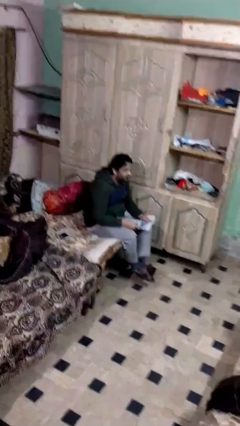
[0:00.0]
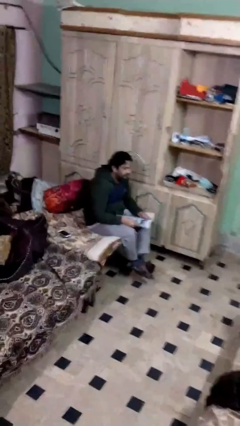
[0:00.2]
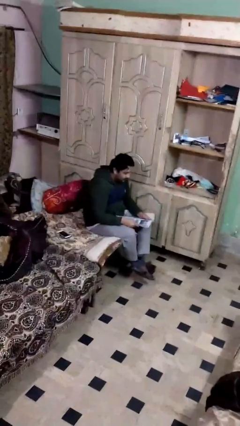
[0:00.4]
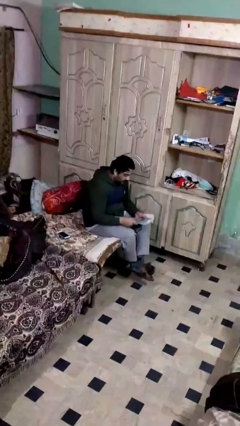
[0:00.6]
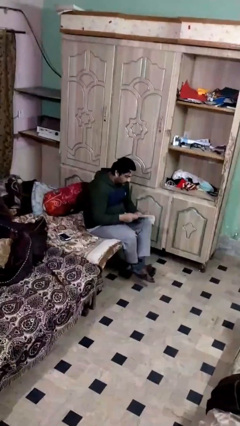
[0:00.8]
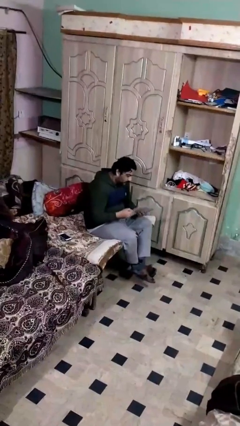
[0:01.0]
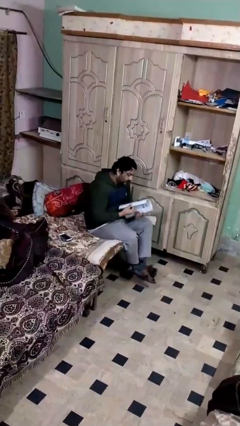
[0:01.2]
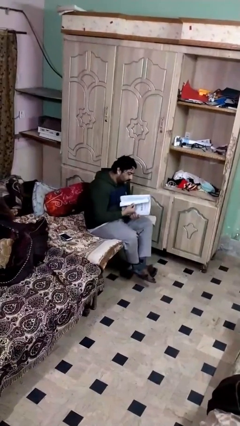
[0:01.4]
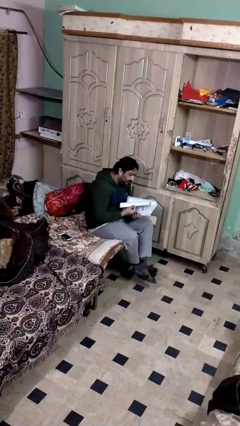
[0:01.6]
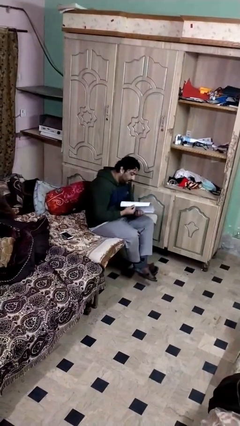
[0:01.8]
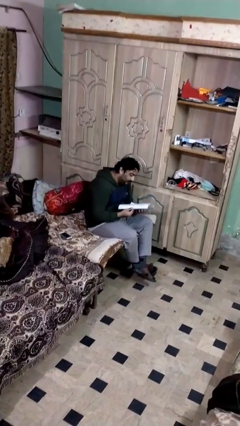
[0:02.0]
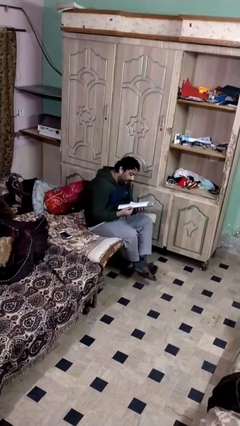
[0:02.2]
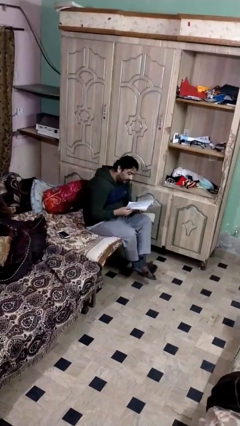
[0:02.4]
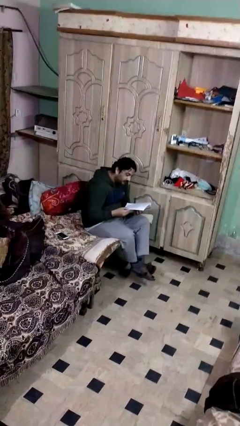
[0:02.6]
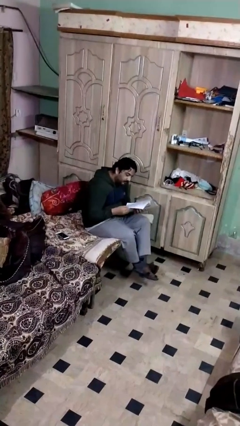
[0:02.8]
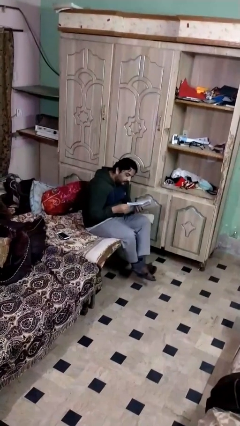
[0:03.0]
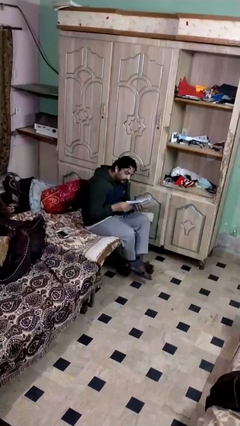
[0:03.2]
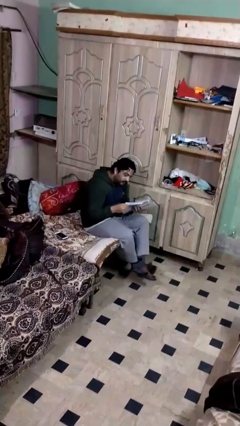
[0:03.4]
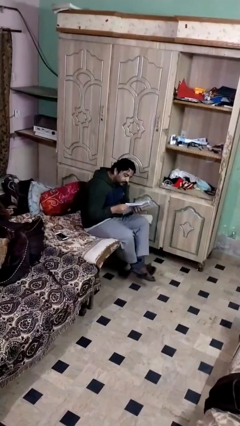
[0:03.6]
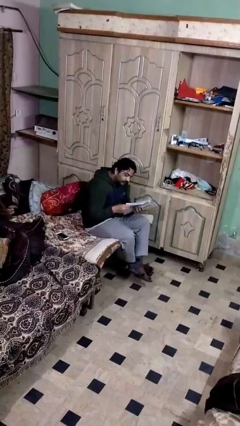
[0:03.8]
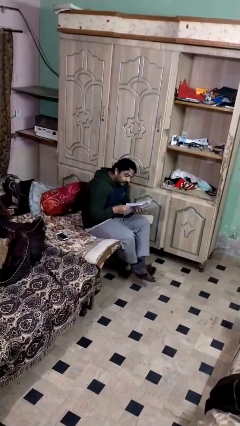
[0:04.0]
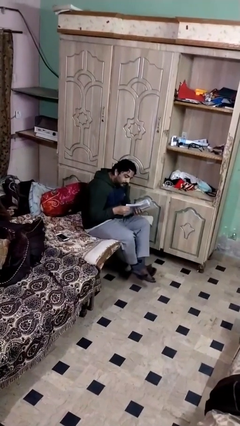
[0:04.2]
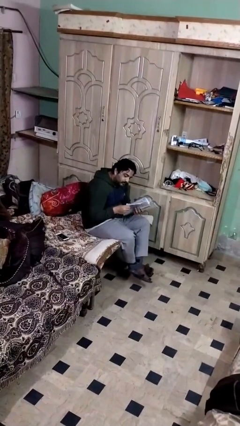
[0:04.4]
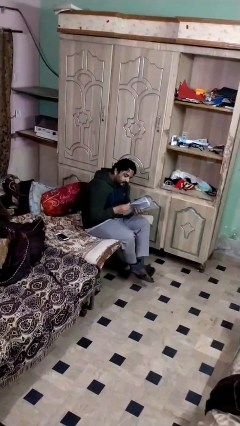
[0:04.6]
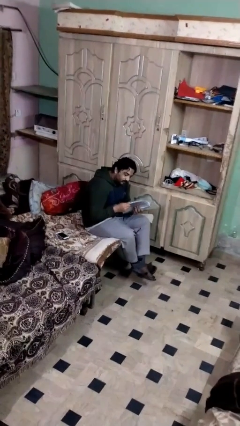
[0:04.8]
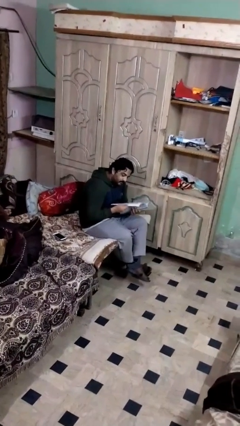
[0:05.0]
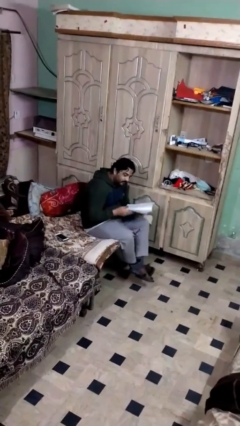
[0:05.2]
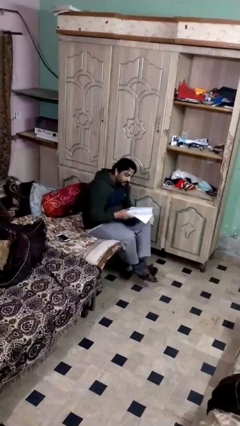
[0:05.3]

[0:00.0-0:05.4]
person reads document

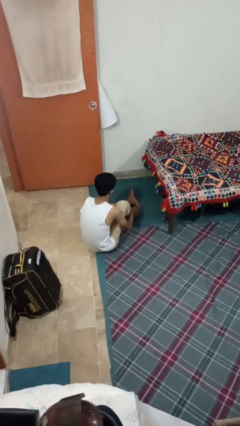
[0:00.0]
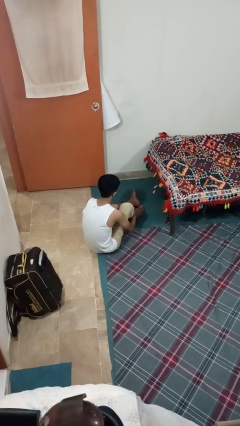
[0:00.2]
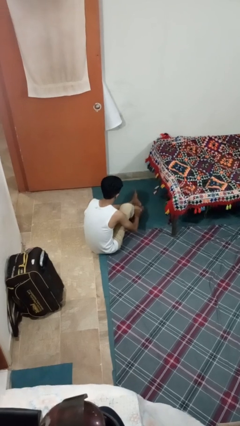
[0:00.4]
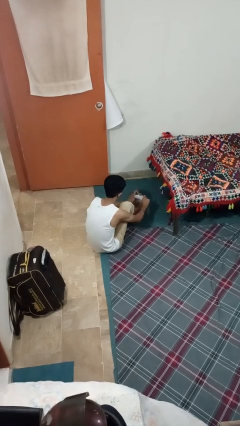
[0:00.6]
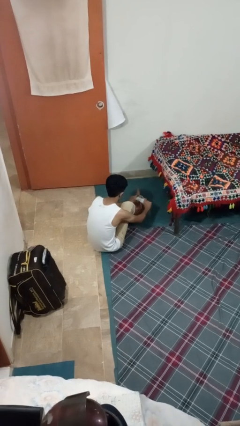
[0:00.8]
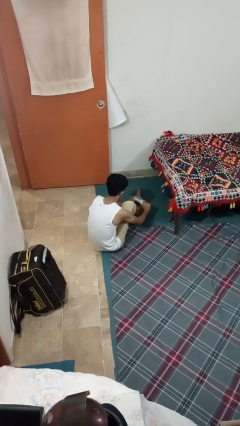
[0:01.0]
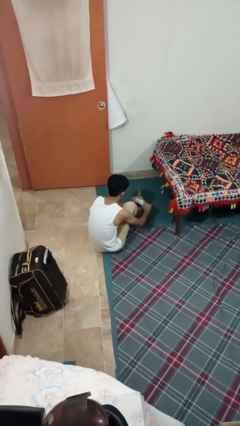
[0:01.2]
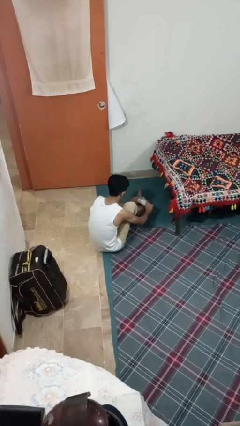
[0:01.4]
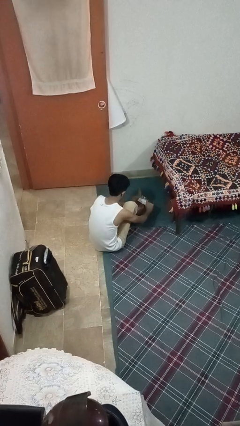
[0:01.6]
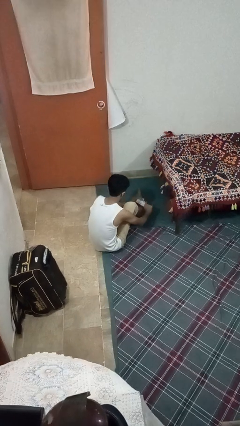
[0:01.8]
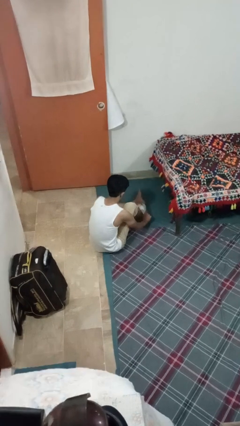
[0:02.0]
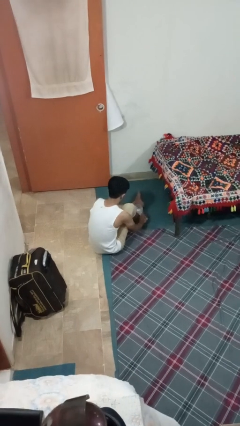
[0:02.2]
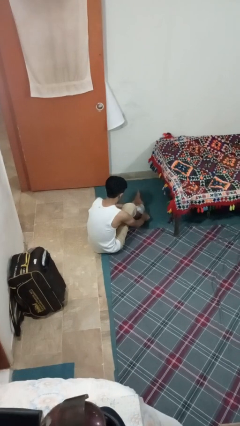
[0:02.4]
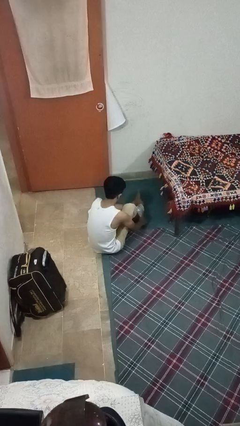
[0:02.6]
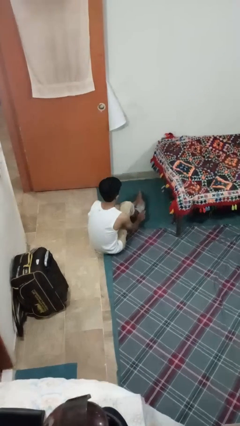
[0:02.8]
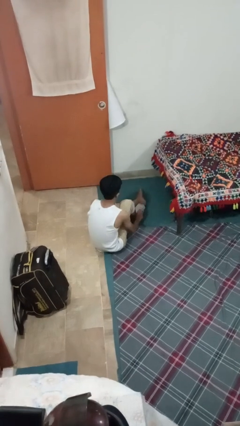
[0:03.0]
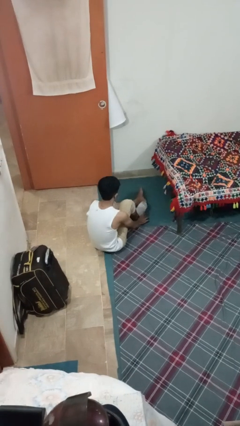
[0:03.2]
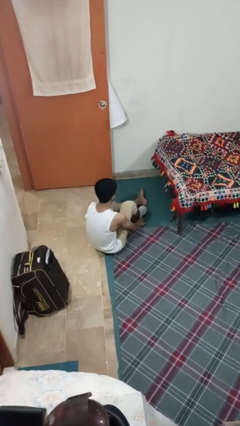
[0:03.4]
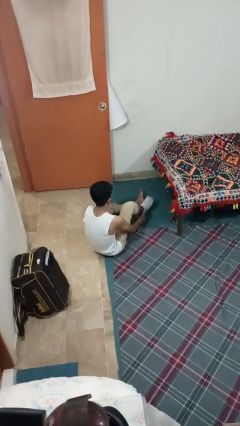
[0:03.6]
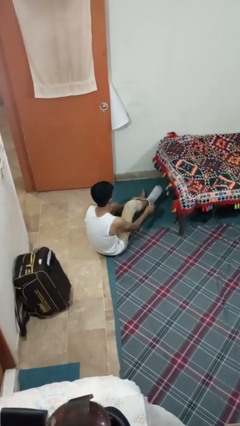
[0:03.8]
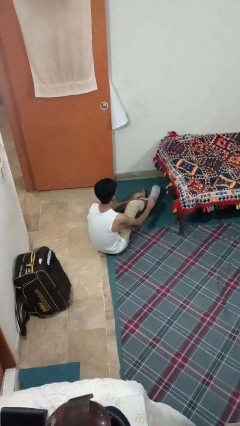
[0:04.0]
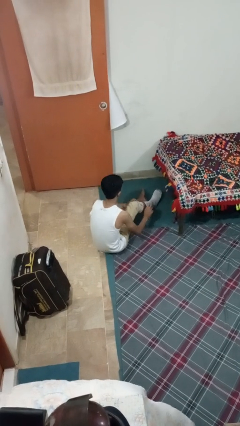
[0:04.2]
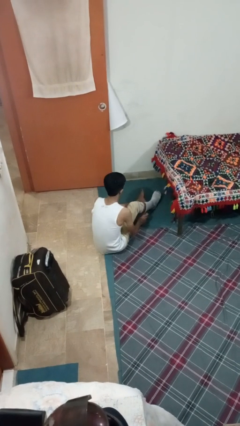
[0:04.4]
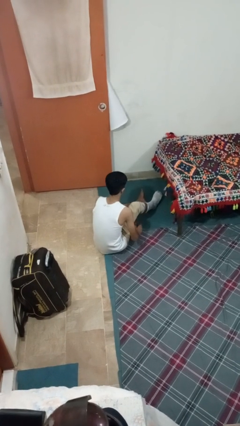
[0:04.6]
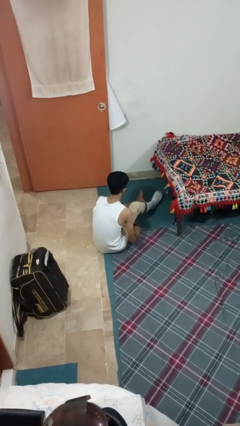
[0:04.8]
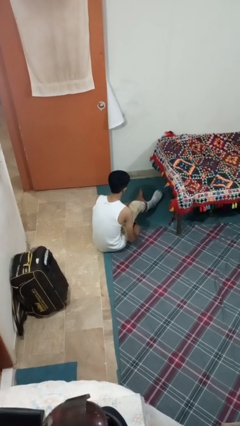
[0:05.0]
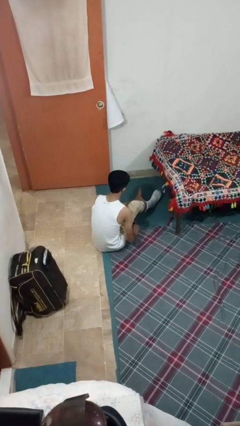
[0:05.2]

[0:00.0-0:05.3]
person puts on socks

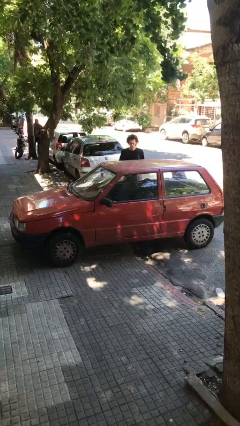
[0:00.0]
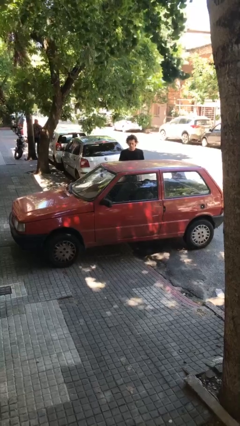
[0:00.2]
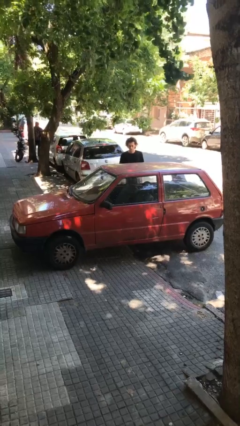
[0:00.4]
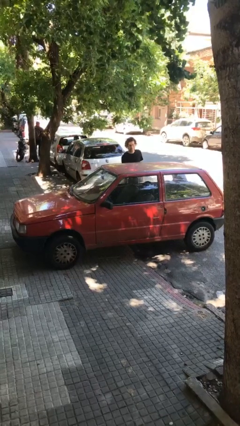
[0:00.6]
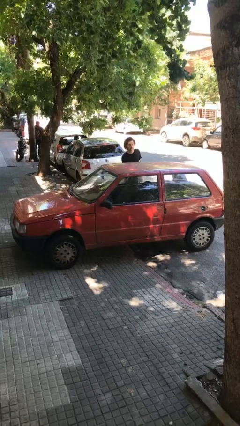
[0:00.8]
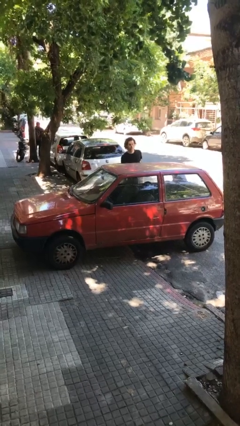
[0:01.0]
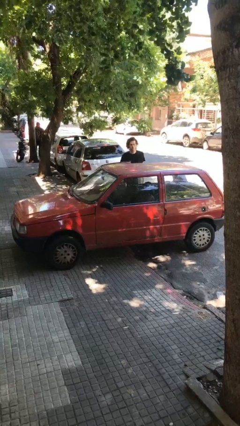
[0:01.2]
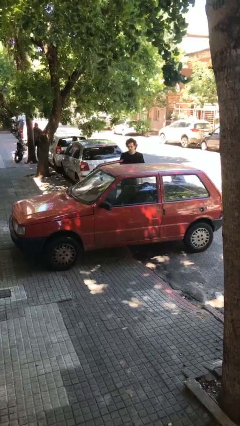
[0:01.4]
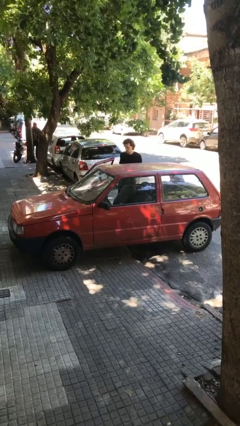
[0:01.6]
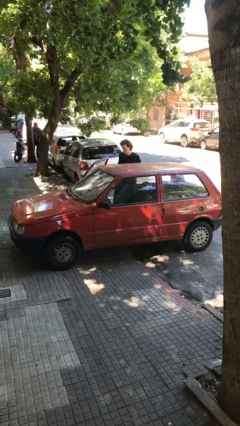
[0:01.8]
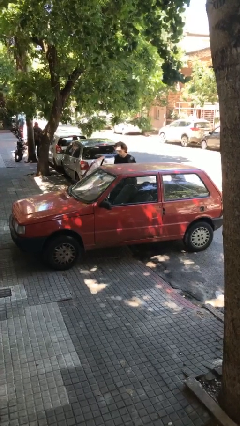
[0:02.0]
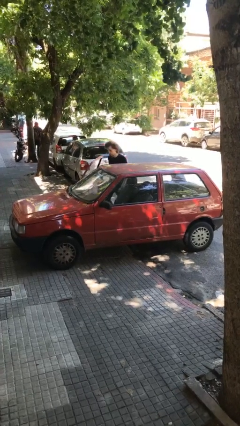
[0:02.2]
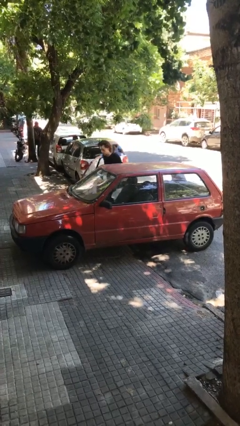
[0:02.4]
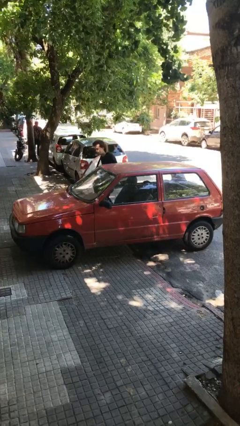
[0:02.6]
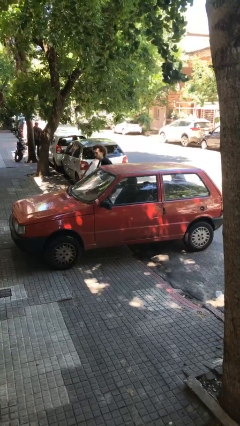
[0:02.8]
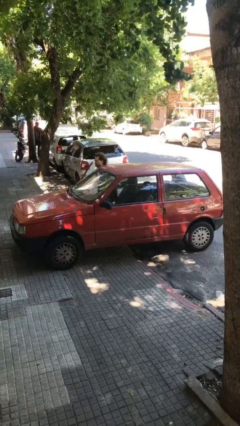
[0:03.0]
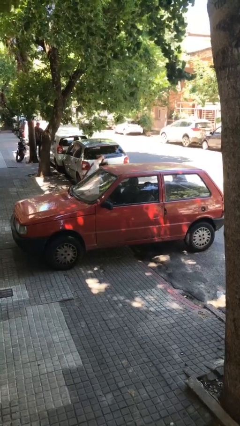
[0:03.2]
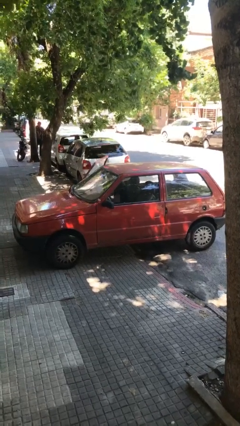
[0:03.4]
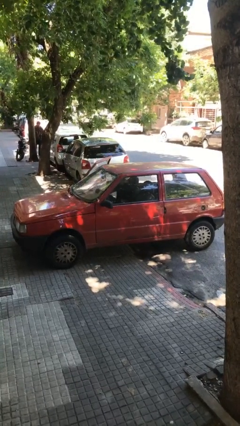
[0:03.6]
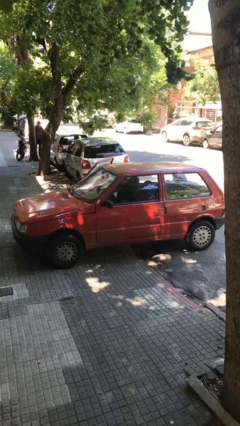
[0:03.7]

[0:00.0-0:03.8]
car picks up person

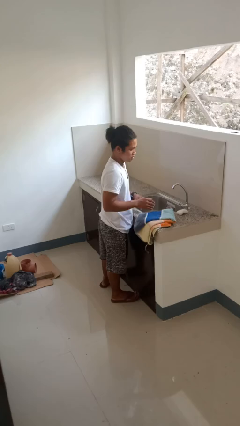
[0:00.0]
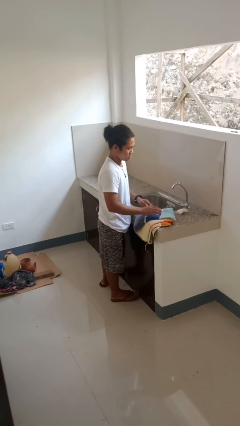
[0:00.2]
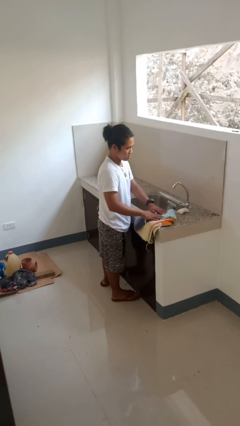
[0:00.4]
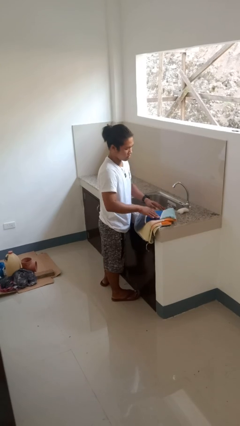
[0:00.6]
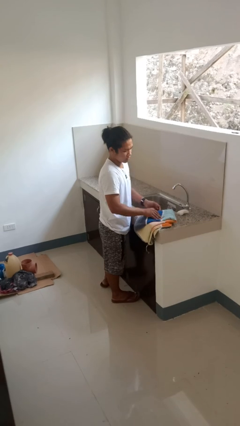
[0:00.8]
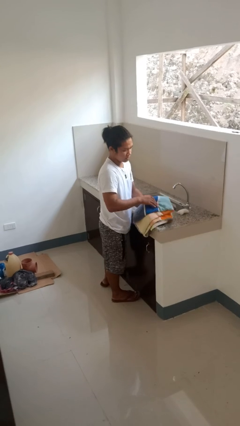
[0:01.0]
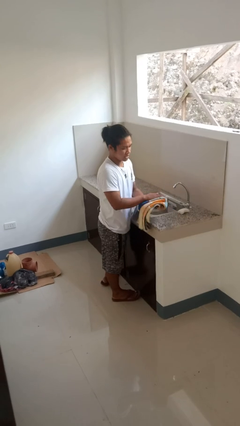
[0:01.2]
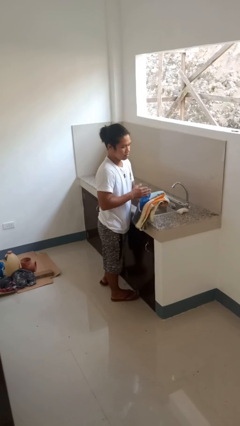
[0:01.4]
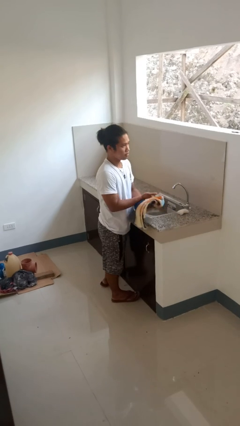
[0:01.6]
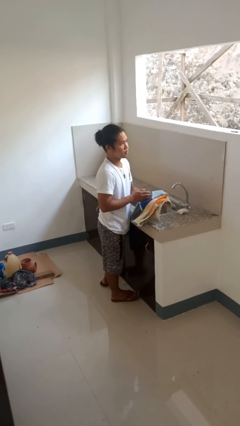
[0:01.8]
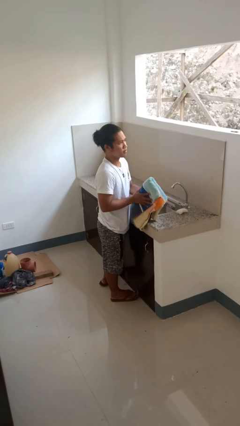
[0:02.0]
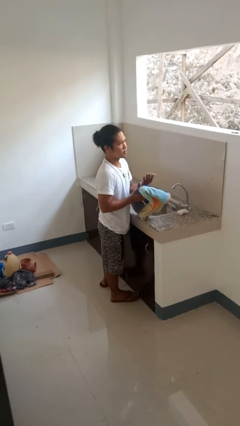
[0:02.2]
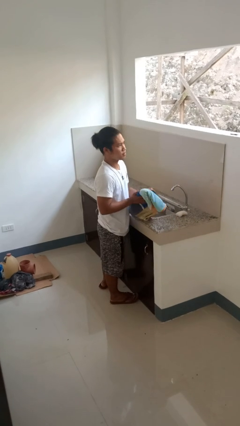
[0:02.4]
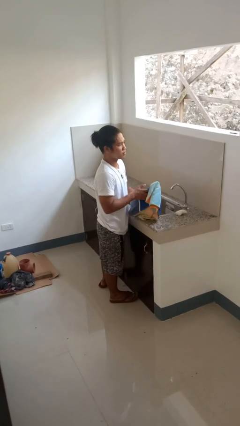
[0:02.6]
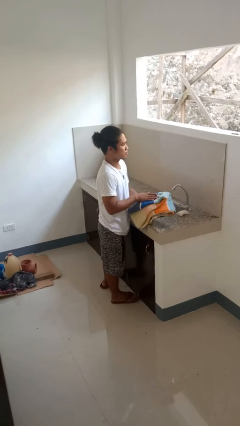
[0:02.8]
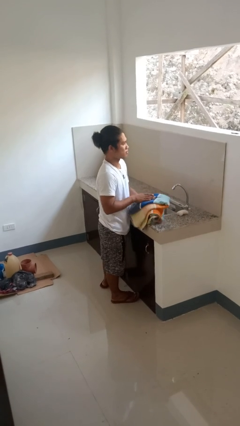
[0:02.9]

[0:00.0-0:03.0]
person dries hands with towel

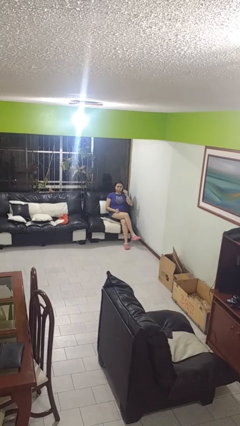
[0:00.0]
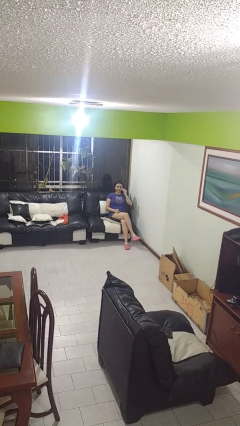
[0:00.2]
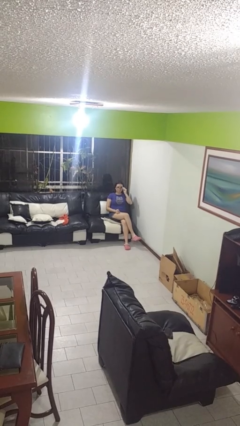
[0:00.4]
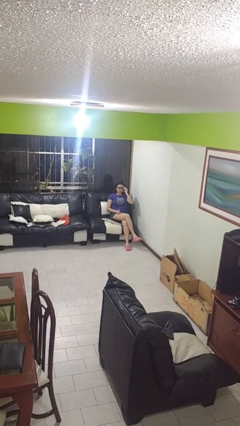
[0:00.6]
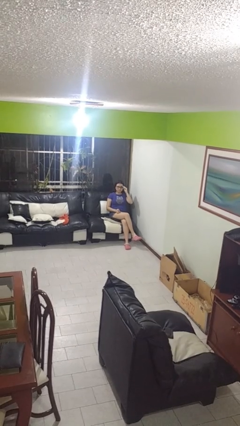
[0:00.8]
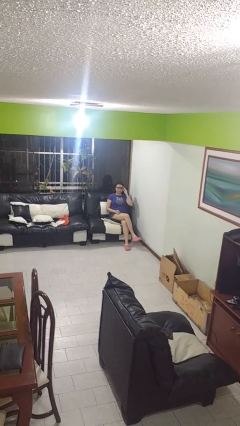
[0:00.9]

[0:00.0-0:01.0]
person puts on glasses
